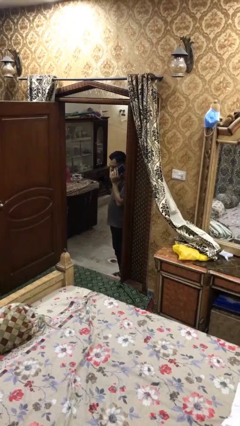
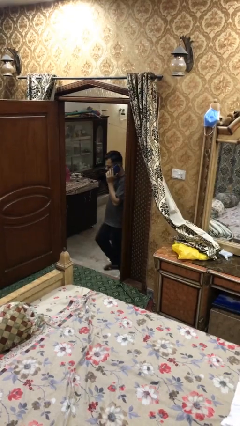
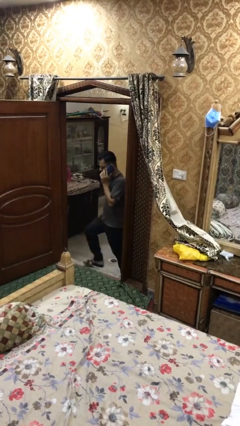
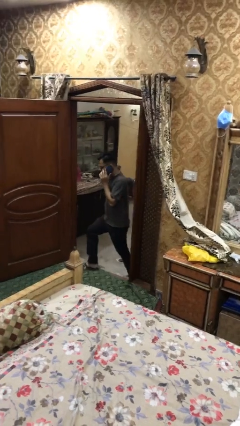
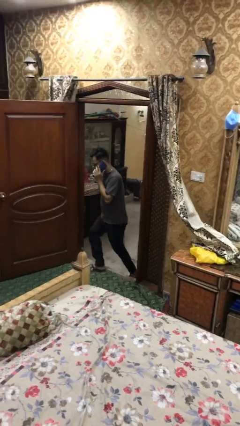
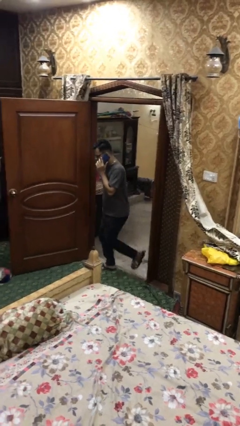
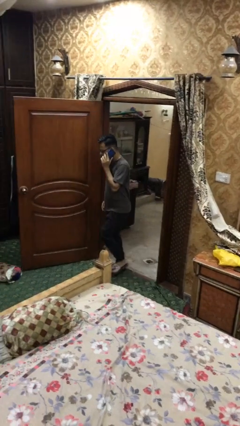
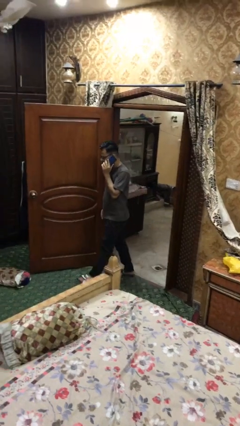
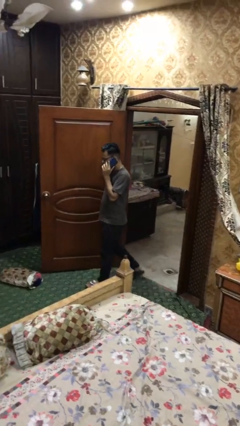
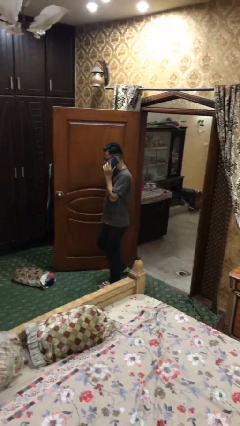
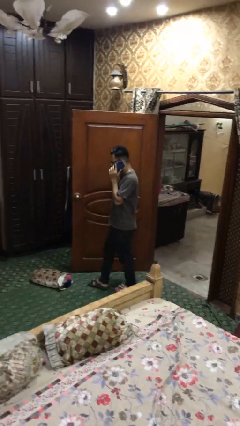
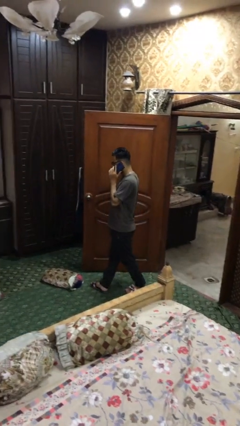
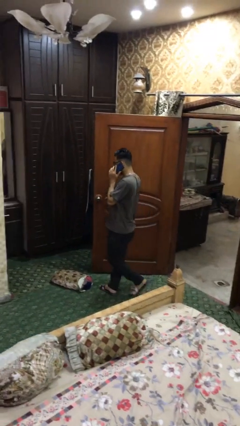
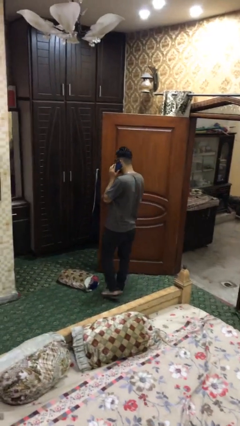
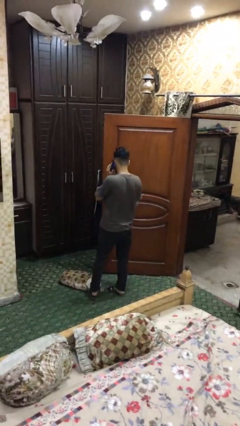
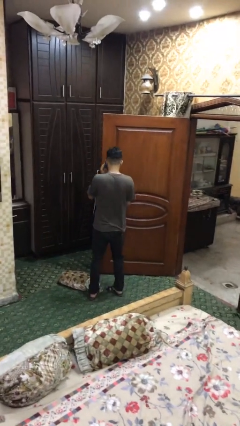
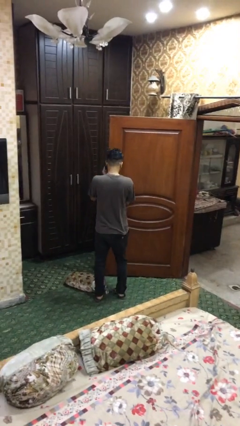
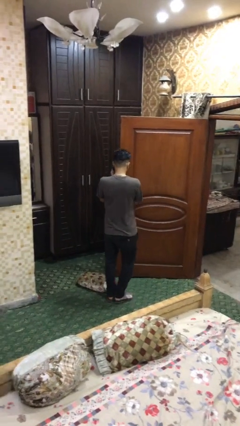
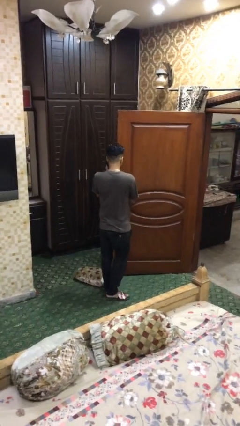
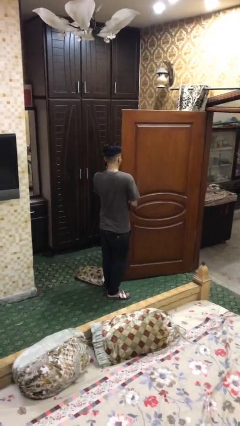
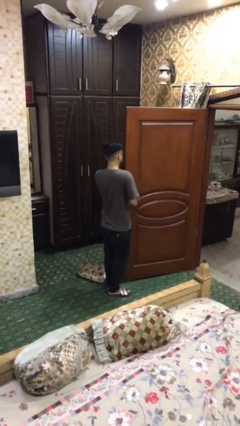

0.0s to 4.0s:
person enters scene through structure

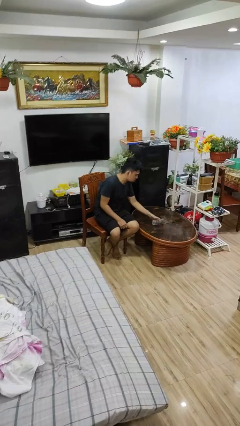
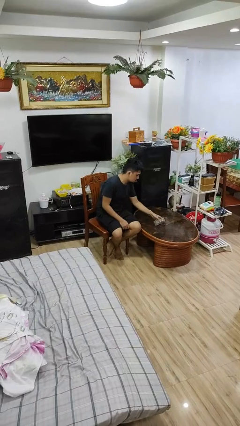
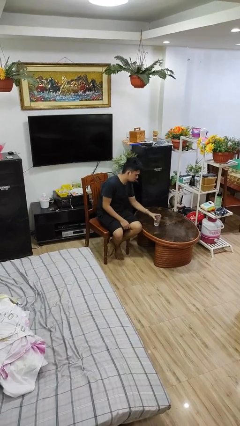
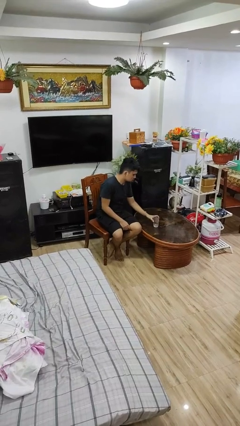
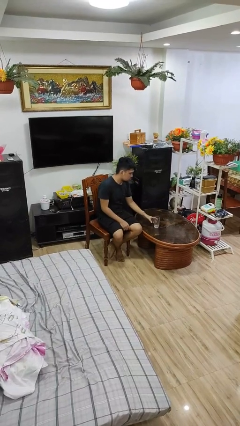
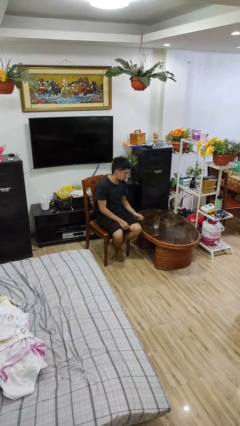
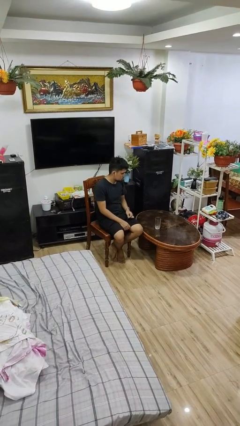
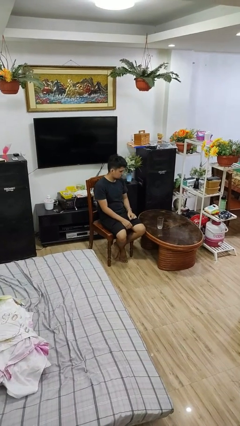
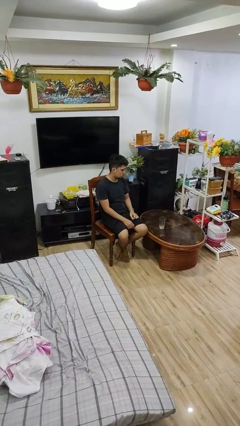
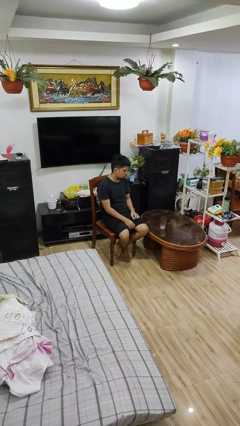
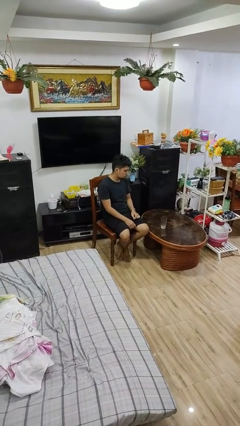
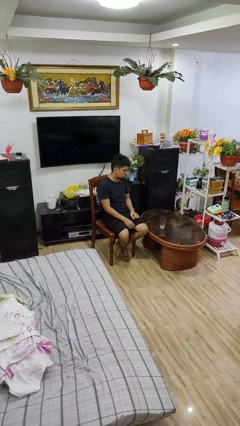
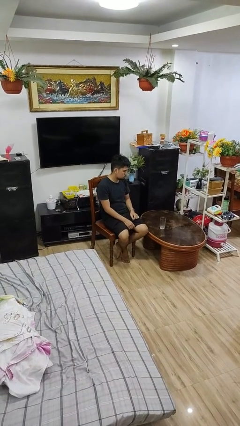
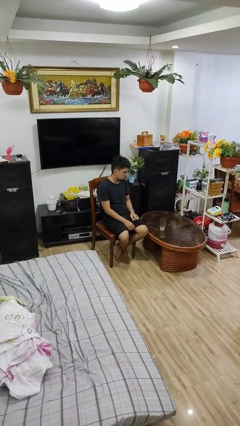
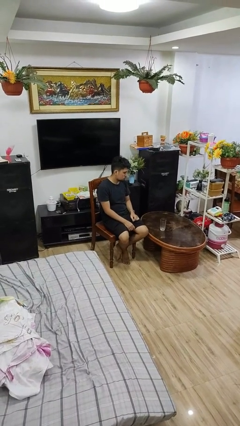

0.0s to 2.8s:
person sets upright glass

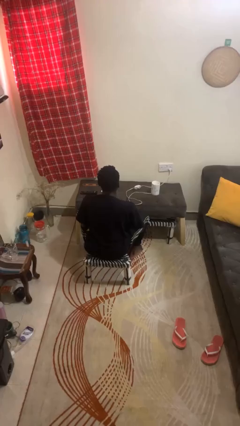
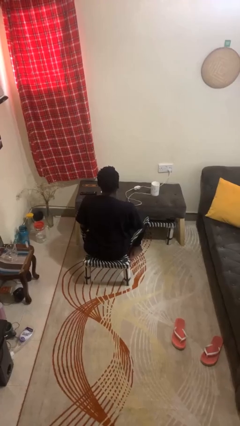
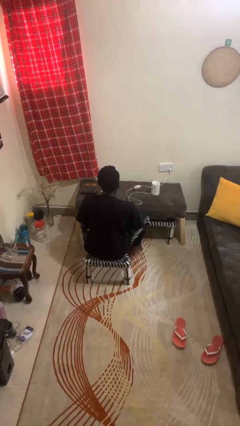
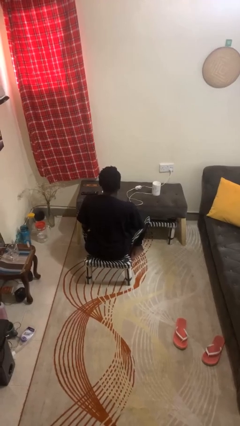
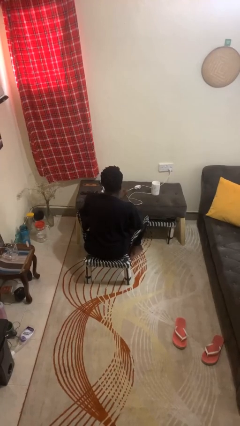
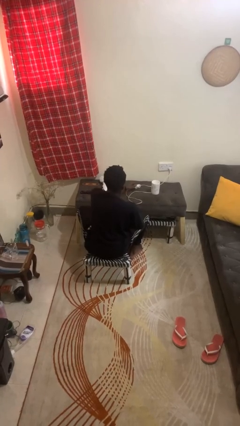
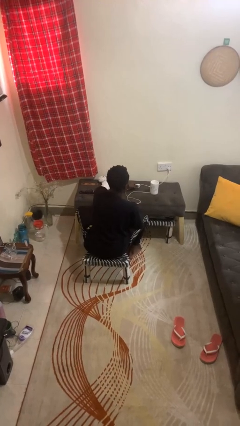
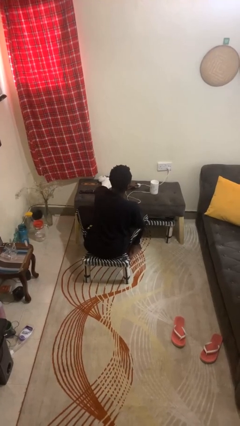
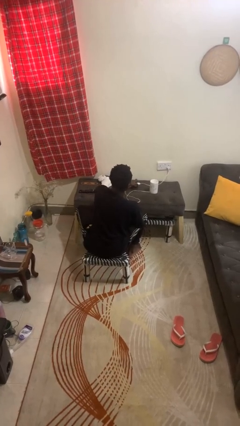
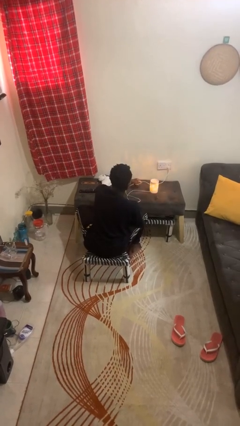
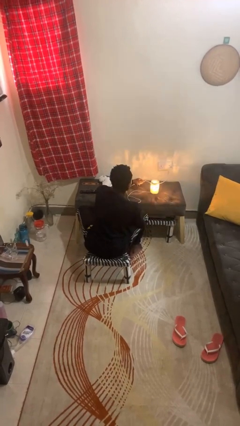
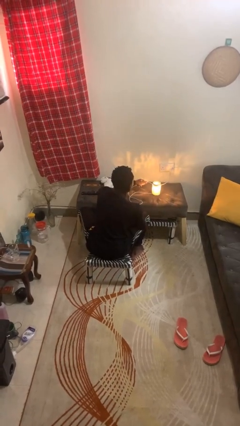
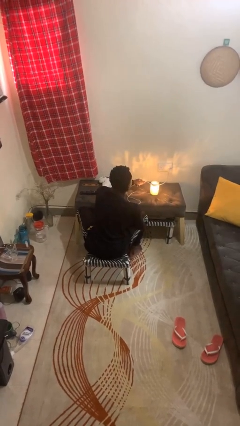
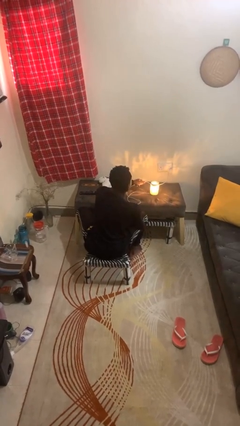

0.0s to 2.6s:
person turns on lamp

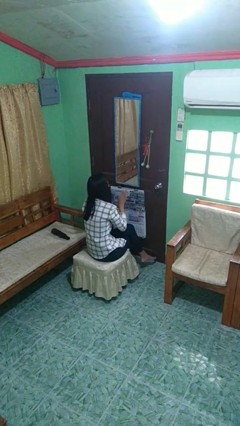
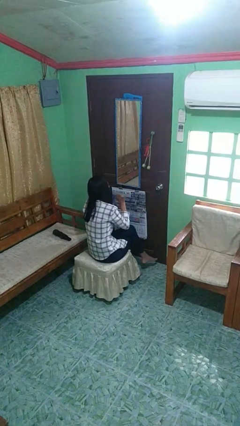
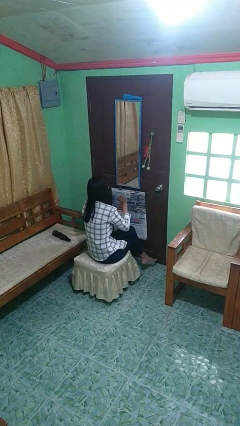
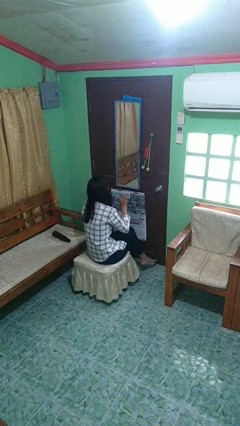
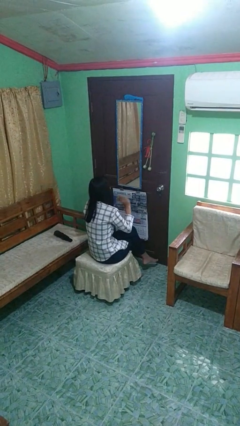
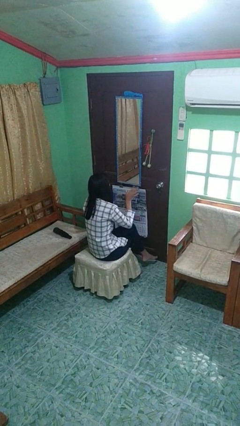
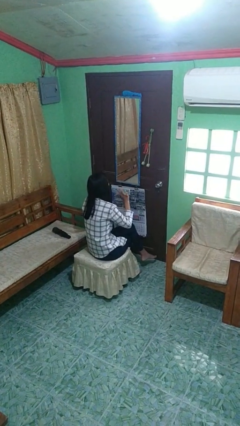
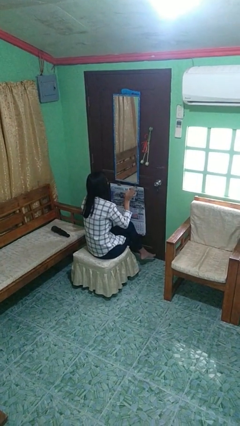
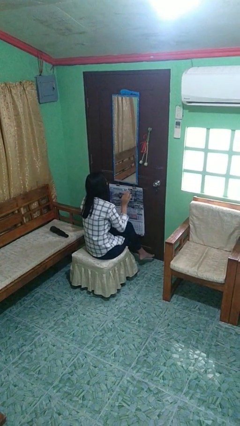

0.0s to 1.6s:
person waves hand over object

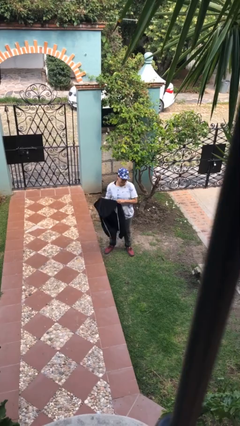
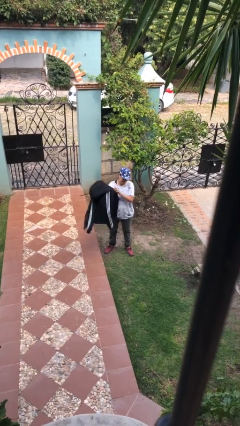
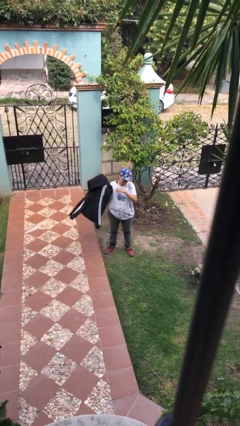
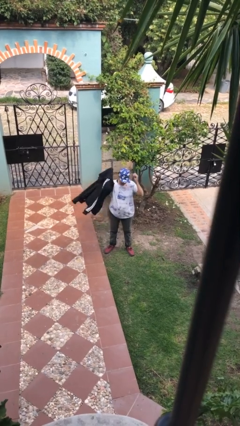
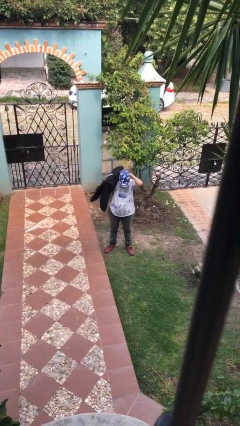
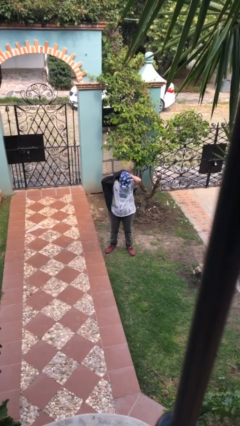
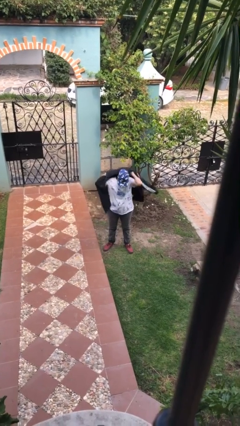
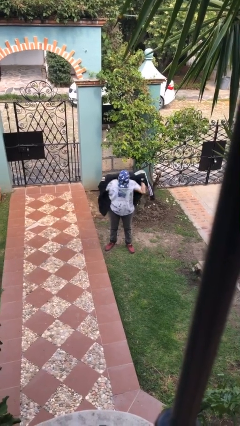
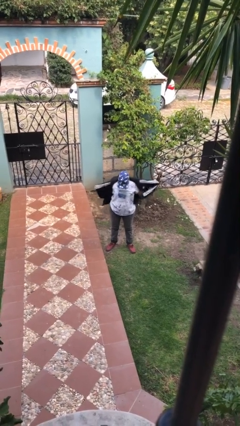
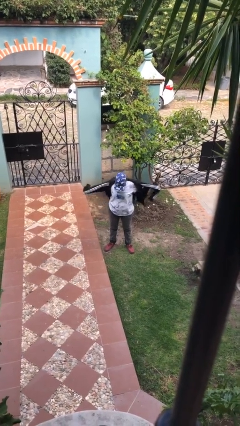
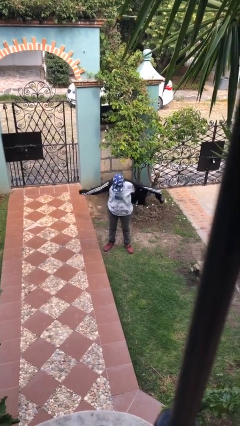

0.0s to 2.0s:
person puts on jacket

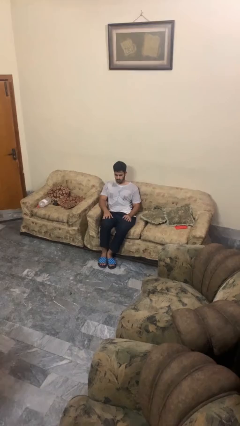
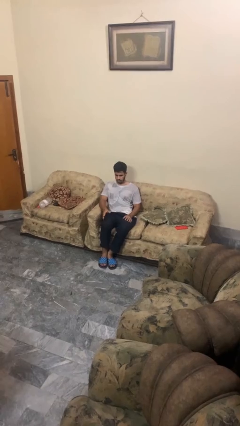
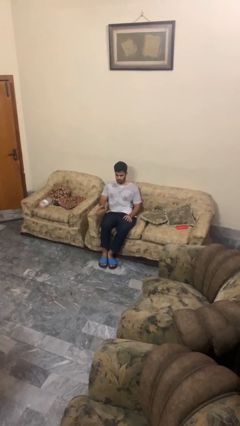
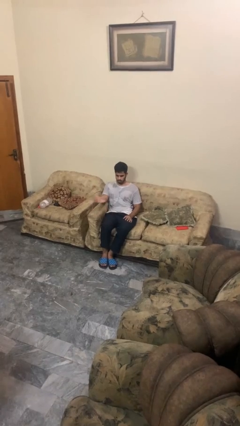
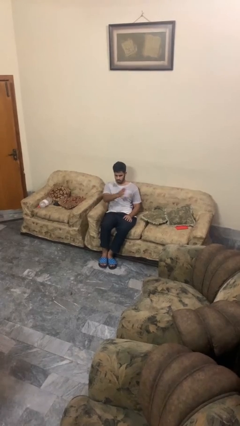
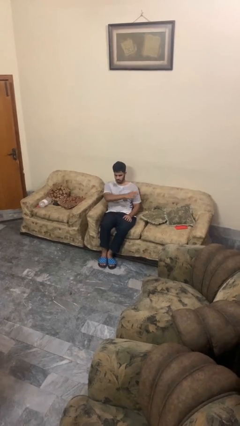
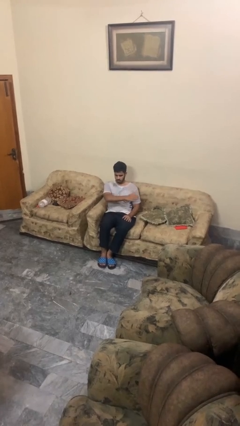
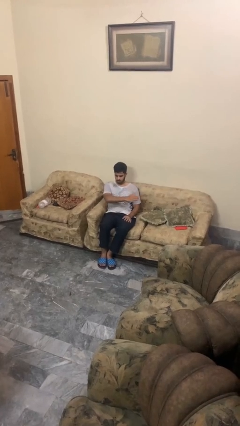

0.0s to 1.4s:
person gestures swipe left

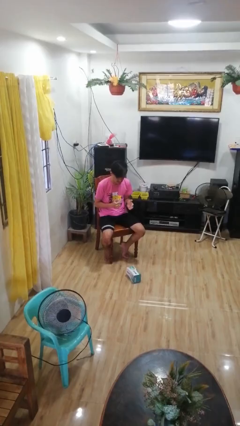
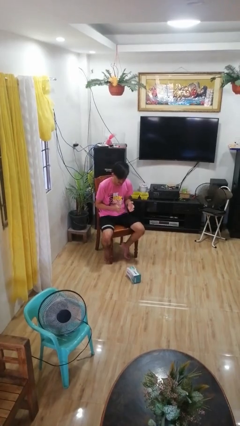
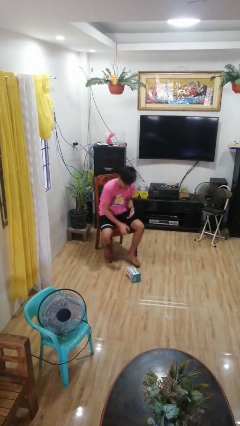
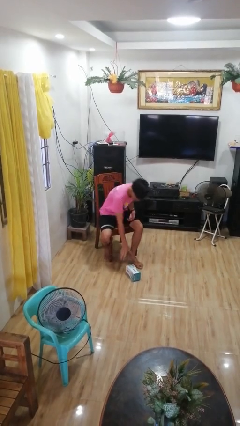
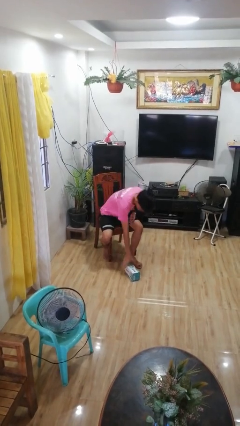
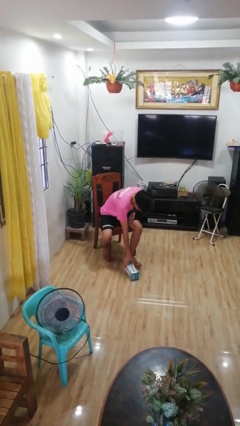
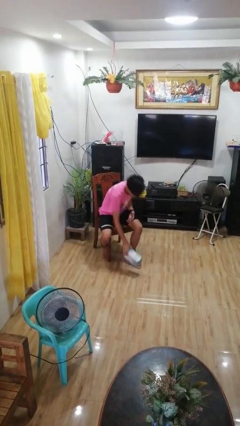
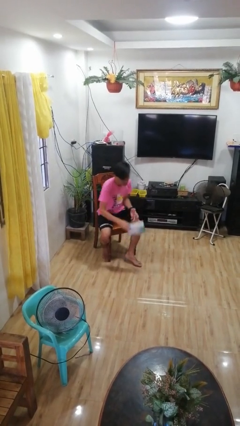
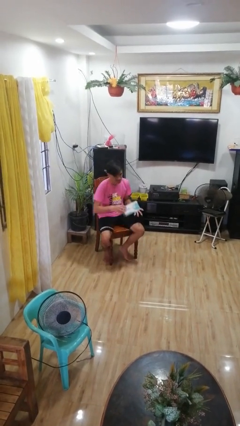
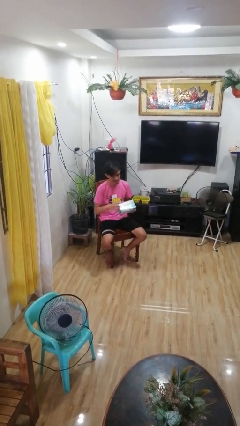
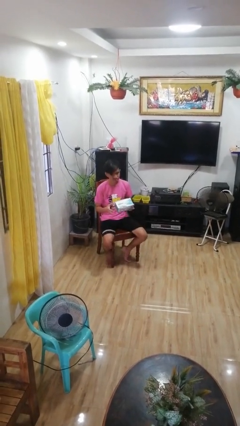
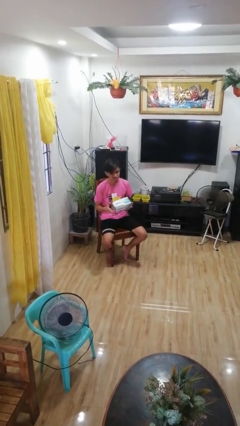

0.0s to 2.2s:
person picks up object from floor

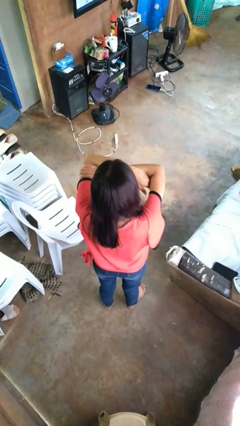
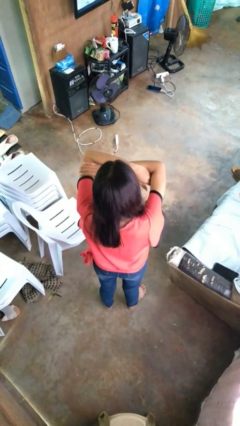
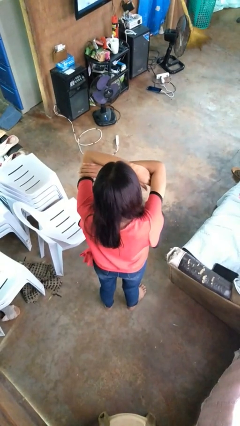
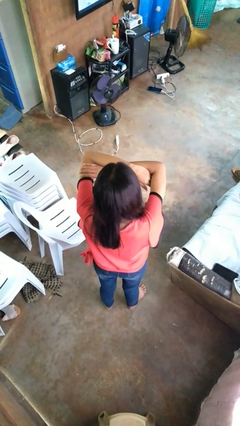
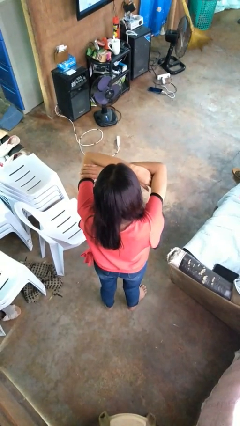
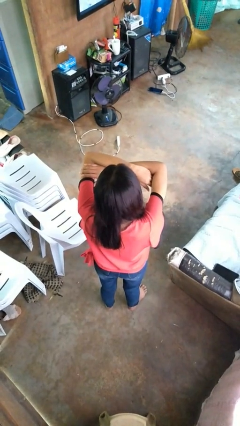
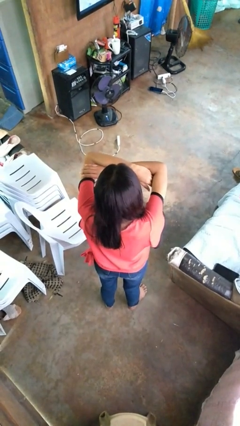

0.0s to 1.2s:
person gestures arms x
